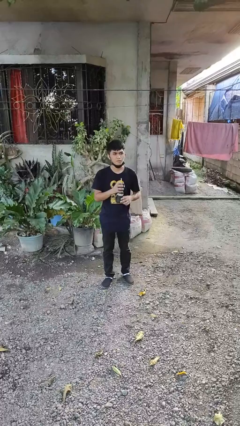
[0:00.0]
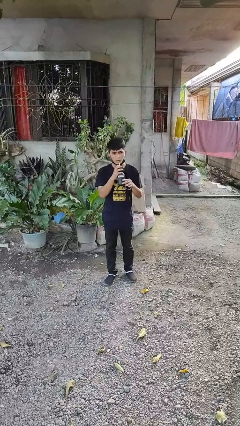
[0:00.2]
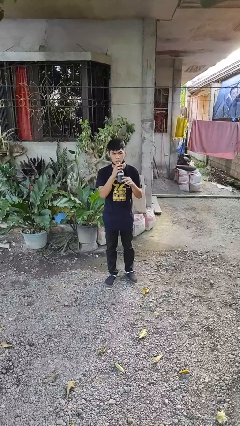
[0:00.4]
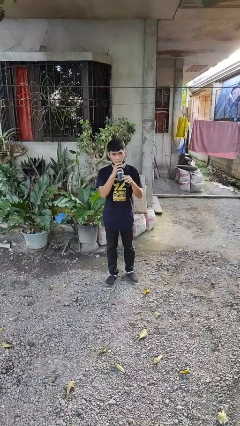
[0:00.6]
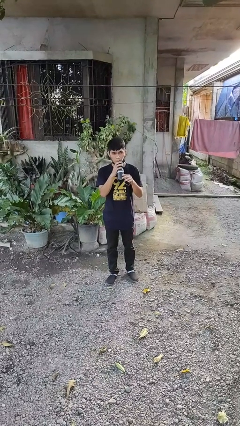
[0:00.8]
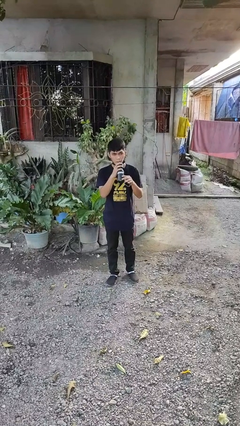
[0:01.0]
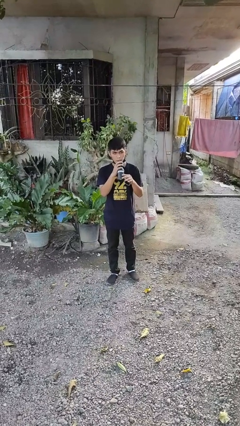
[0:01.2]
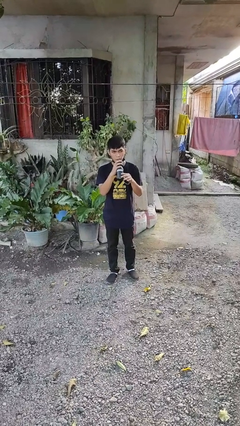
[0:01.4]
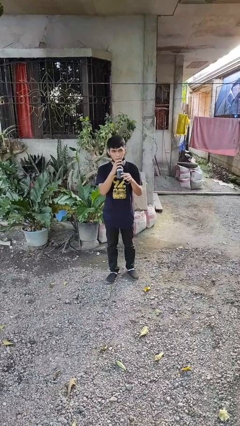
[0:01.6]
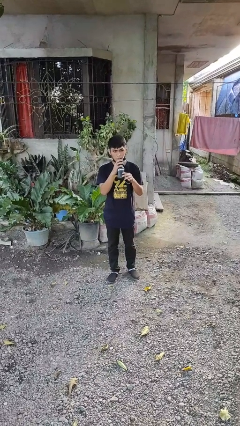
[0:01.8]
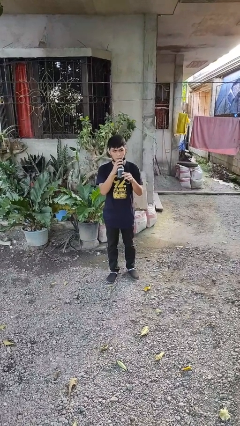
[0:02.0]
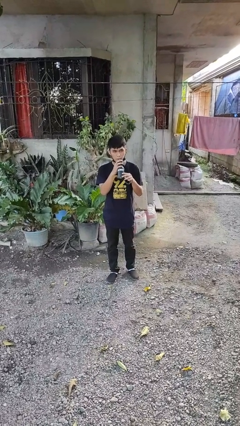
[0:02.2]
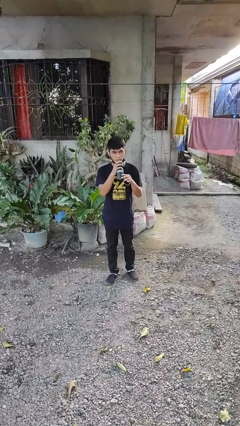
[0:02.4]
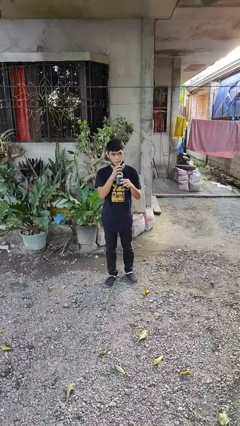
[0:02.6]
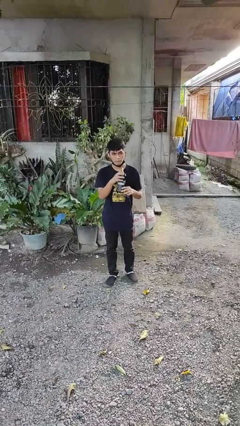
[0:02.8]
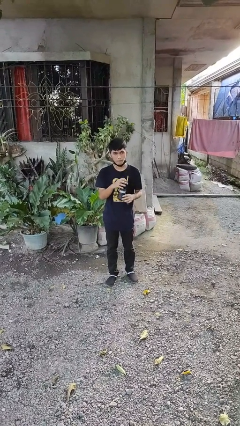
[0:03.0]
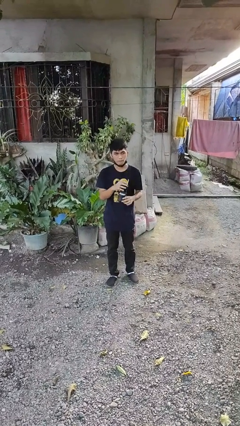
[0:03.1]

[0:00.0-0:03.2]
person drinks from straw

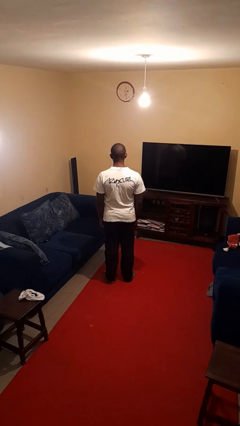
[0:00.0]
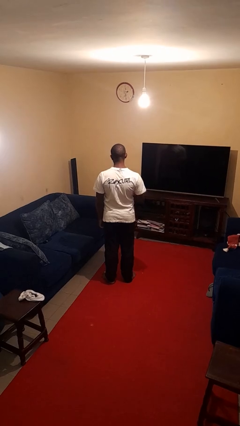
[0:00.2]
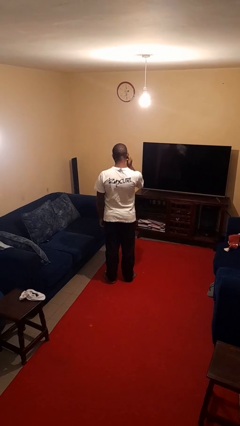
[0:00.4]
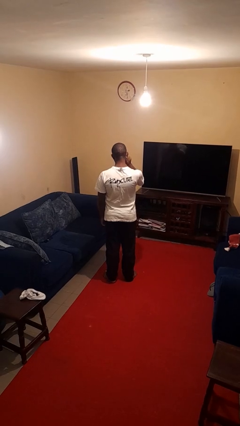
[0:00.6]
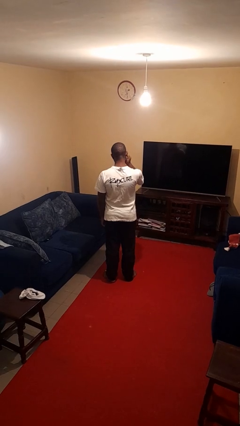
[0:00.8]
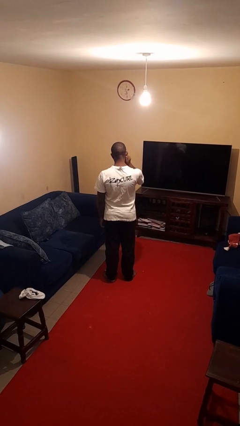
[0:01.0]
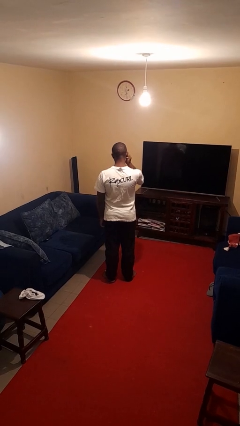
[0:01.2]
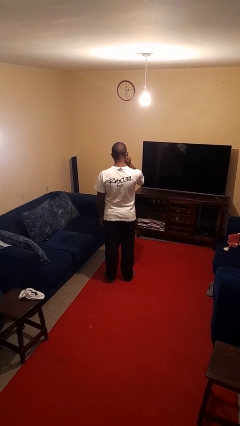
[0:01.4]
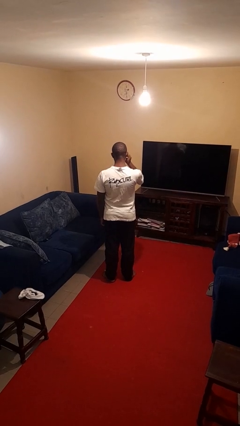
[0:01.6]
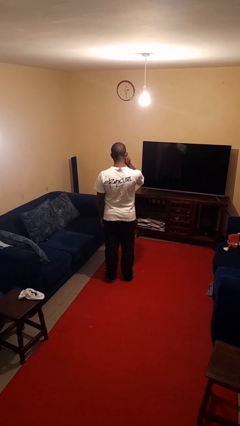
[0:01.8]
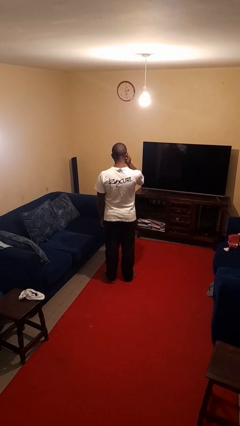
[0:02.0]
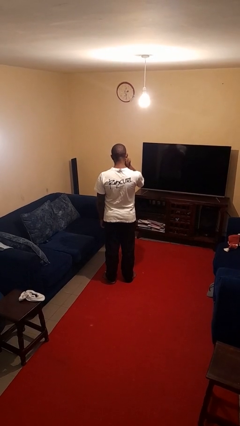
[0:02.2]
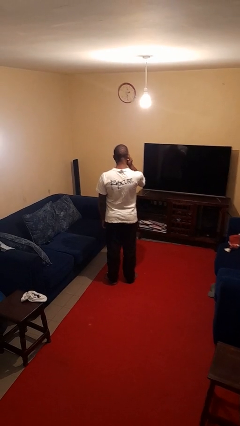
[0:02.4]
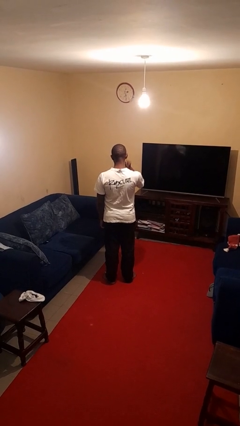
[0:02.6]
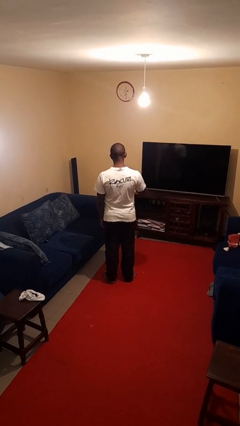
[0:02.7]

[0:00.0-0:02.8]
person touches earlobe

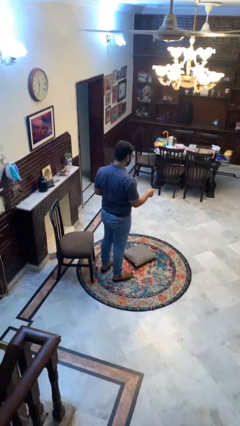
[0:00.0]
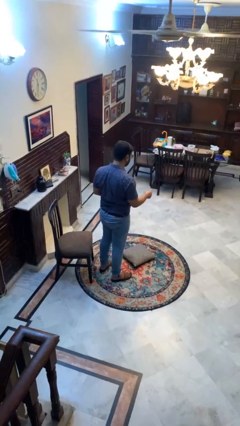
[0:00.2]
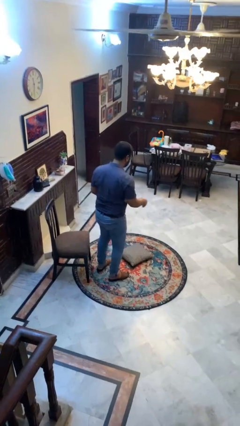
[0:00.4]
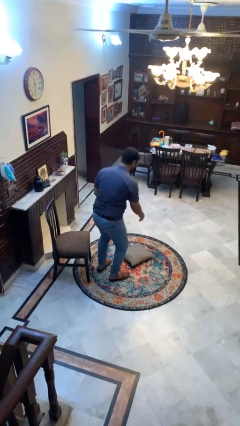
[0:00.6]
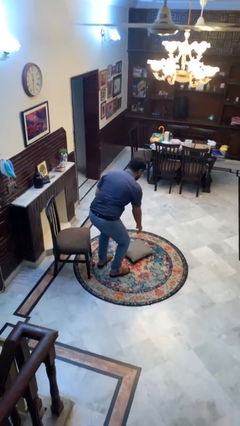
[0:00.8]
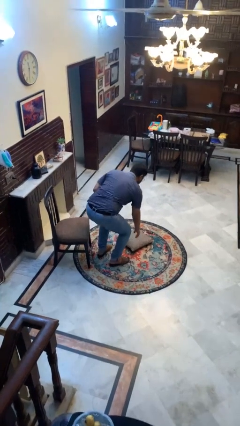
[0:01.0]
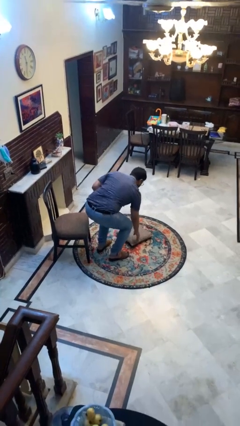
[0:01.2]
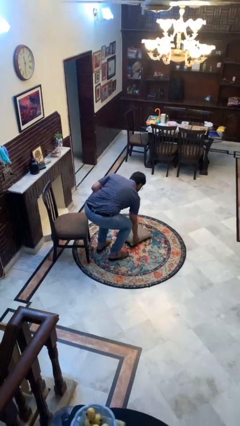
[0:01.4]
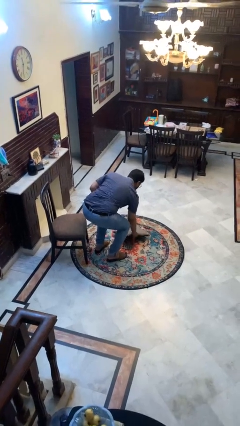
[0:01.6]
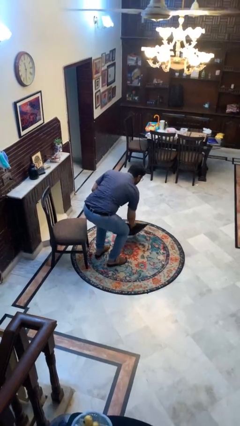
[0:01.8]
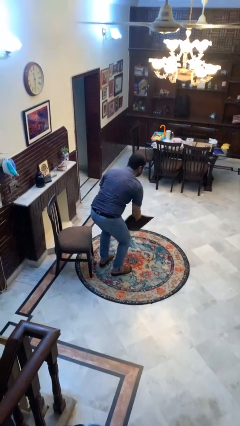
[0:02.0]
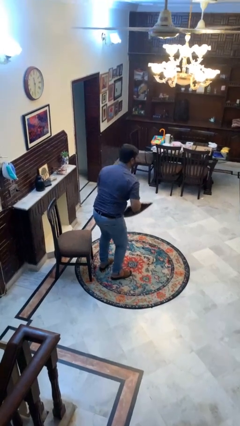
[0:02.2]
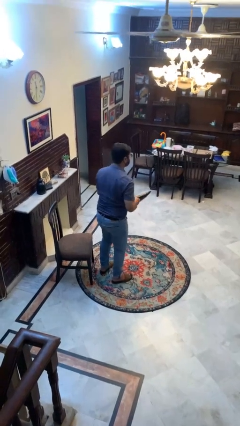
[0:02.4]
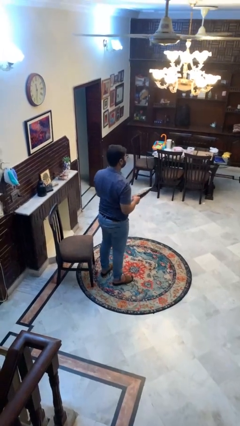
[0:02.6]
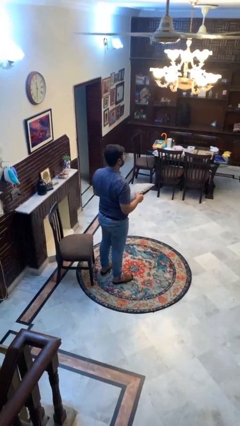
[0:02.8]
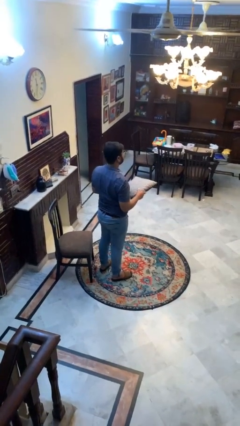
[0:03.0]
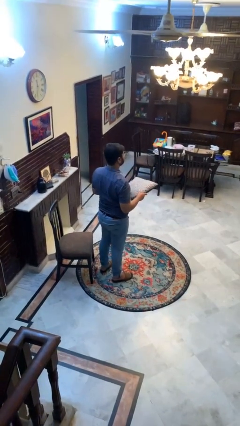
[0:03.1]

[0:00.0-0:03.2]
person picks up object from floor

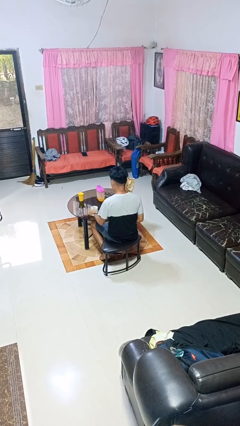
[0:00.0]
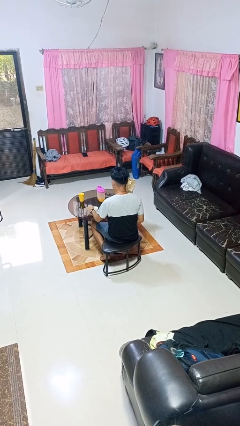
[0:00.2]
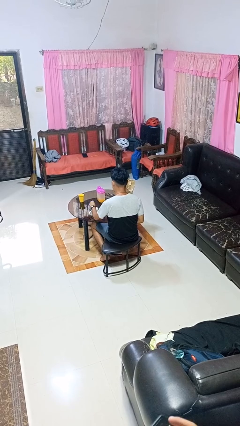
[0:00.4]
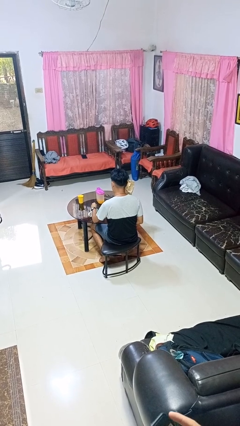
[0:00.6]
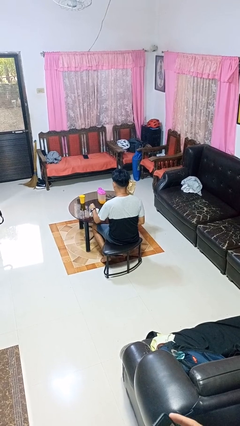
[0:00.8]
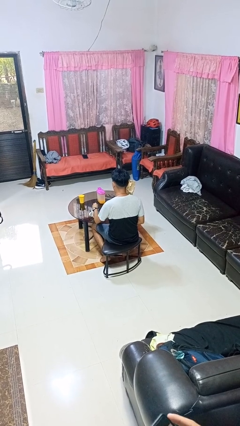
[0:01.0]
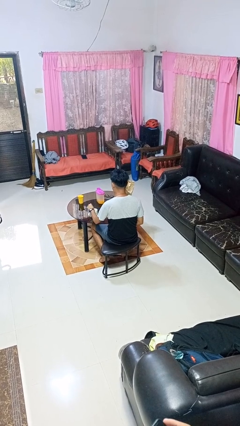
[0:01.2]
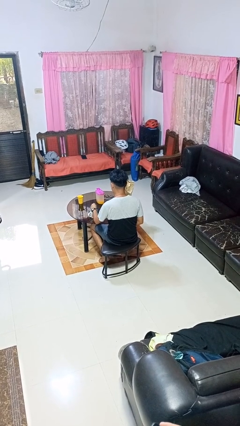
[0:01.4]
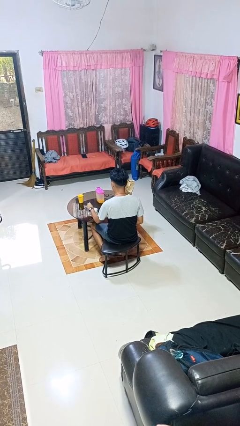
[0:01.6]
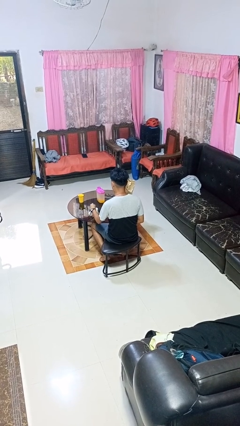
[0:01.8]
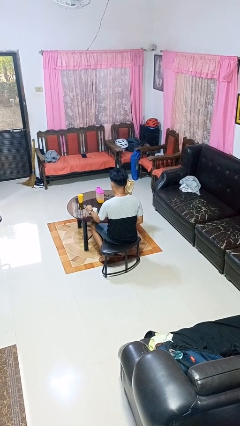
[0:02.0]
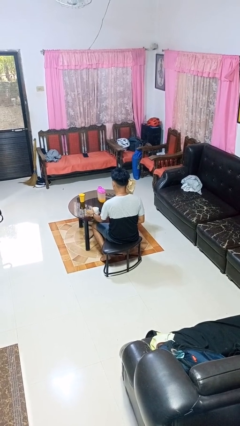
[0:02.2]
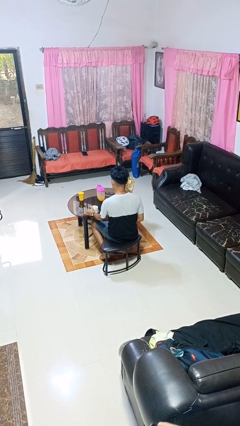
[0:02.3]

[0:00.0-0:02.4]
person stirs mug

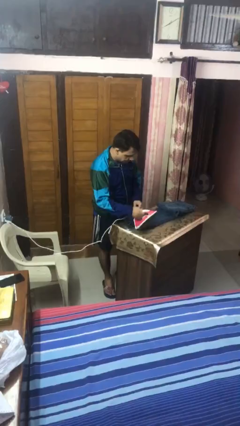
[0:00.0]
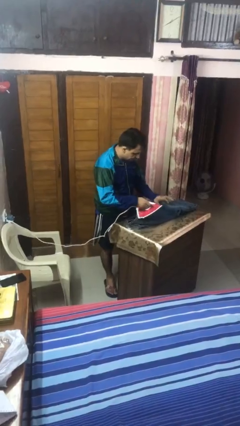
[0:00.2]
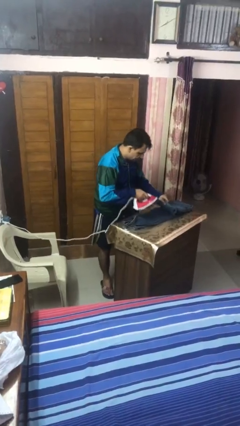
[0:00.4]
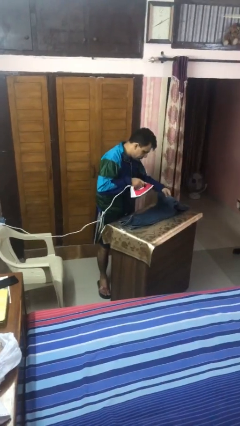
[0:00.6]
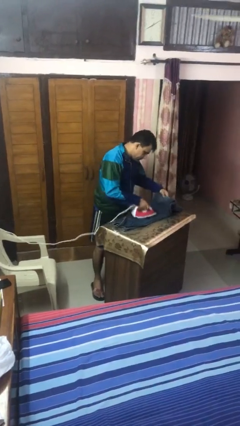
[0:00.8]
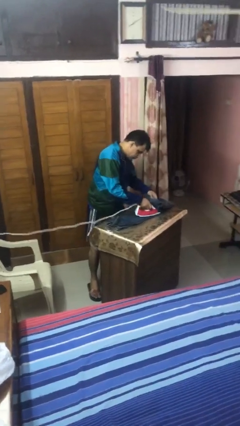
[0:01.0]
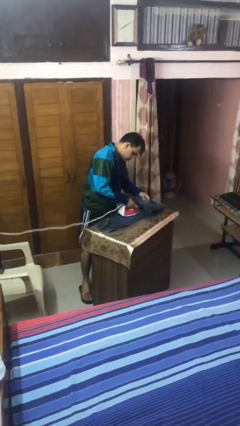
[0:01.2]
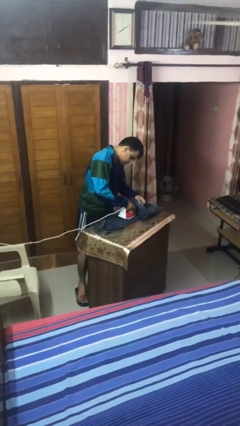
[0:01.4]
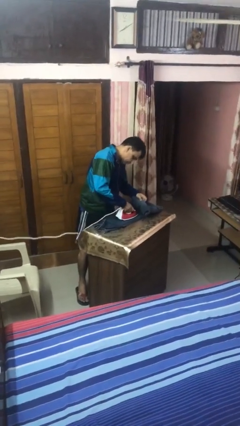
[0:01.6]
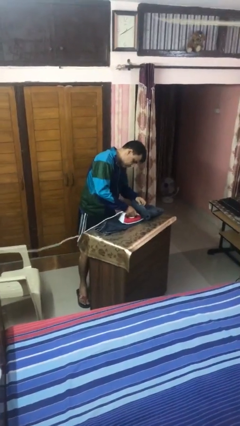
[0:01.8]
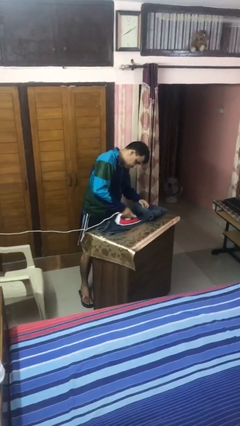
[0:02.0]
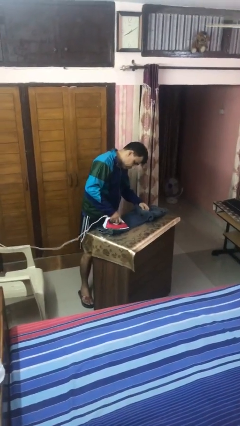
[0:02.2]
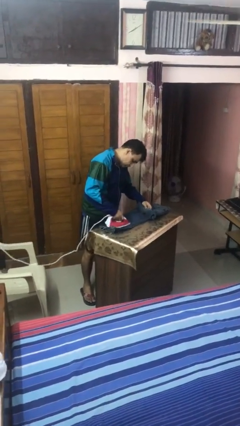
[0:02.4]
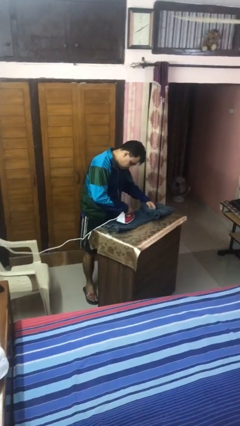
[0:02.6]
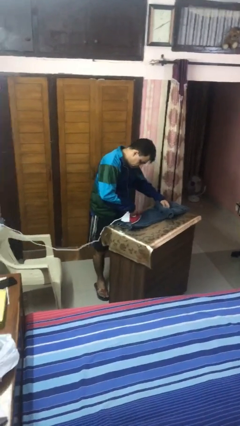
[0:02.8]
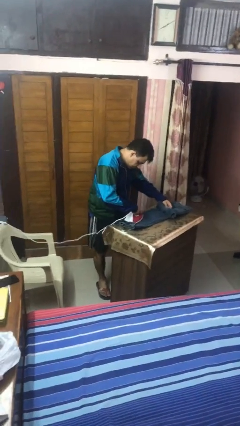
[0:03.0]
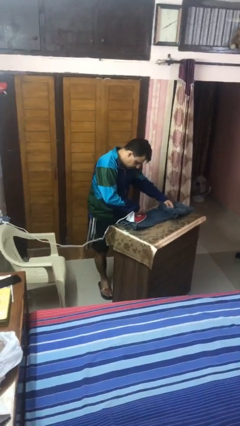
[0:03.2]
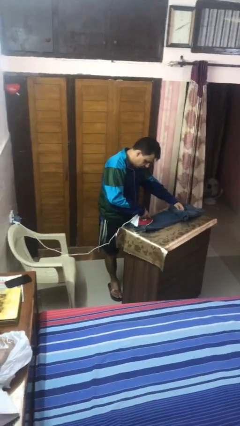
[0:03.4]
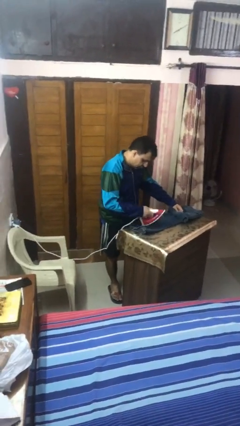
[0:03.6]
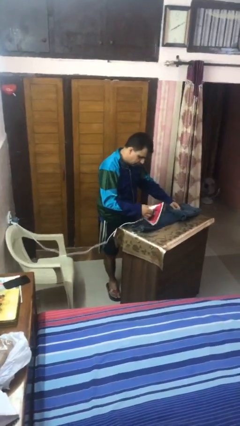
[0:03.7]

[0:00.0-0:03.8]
person irons clothes

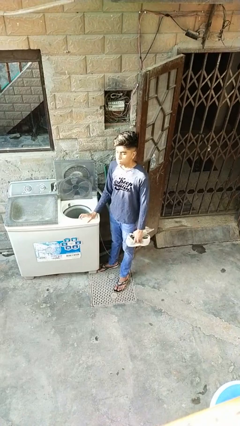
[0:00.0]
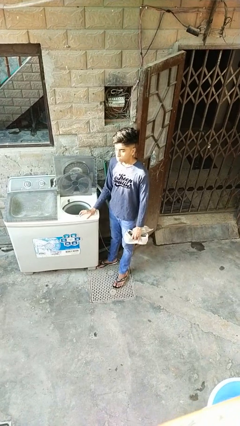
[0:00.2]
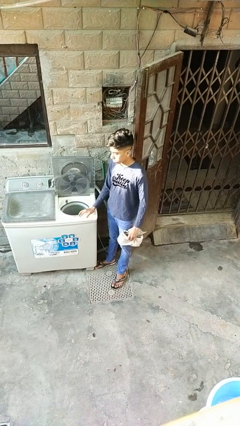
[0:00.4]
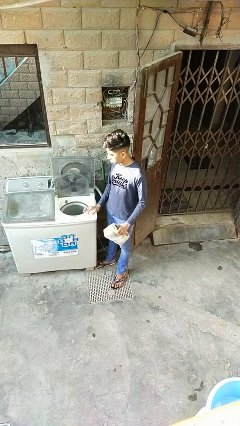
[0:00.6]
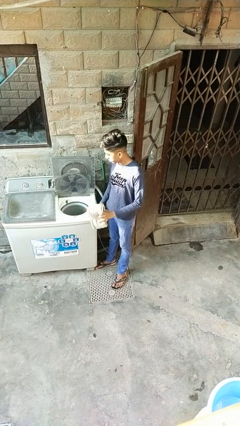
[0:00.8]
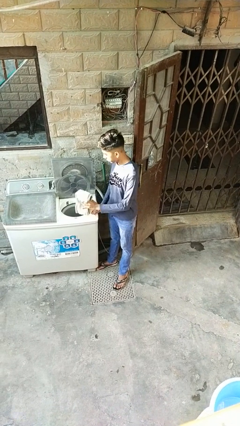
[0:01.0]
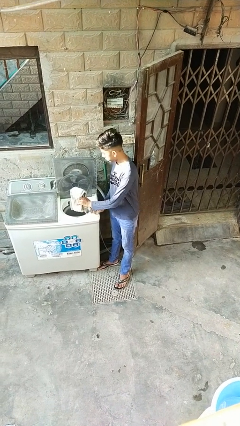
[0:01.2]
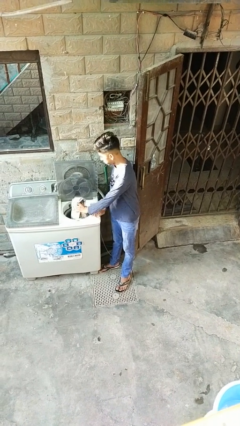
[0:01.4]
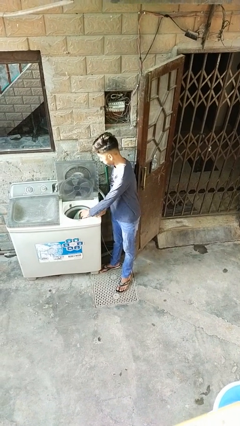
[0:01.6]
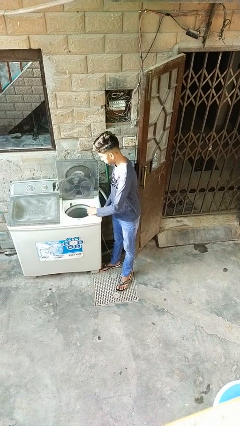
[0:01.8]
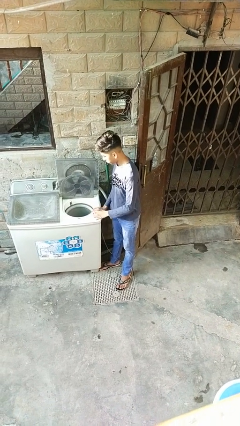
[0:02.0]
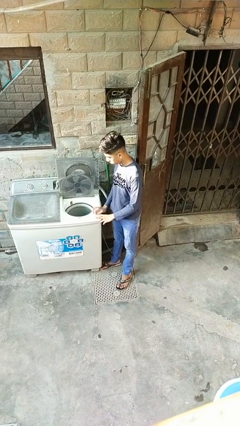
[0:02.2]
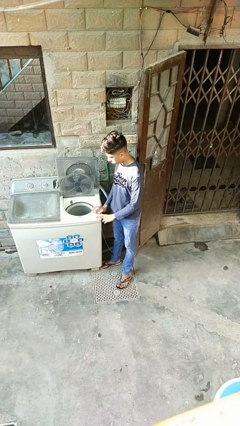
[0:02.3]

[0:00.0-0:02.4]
person loads dryer
